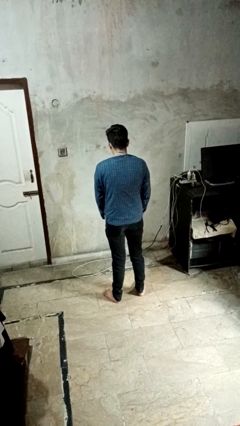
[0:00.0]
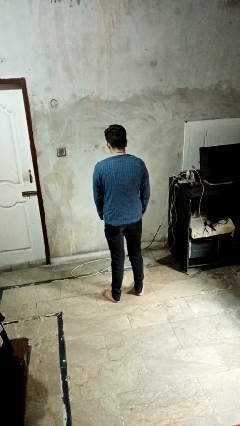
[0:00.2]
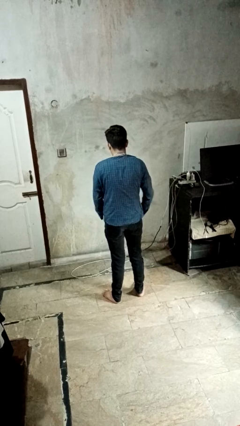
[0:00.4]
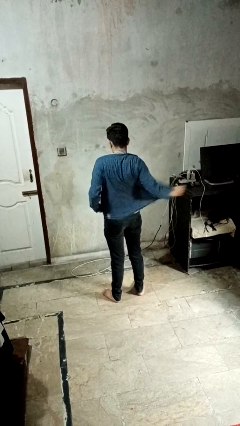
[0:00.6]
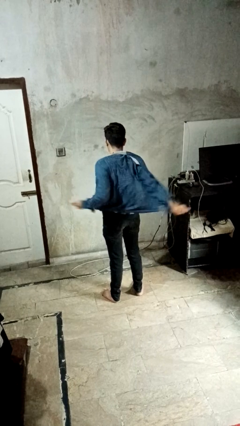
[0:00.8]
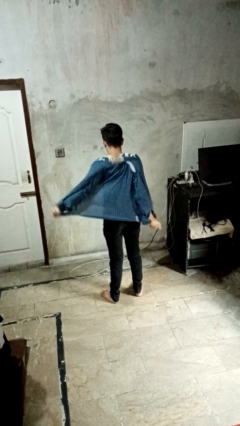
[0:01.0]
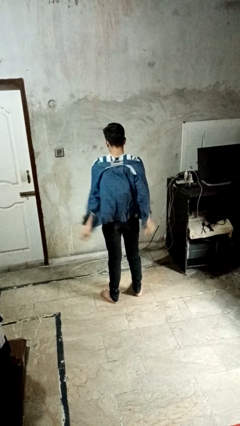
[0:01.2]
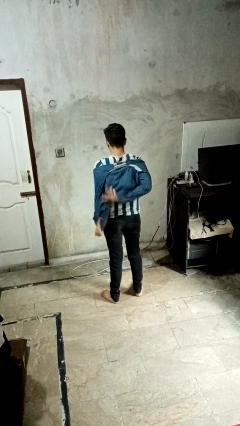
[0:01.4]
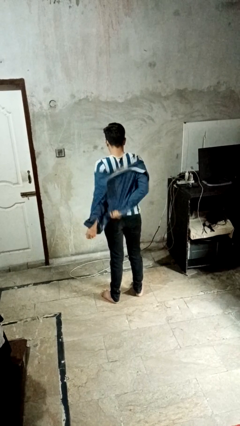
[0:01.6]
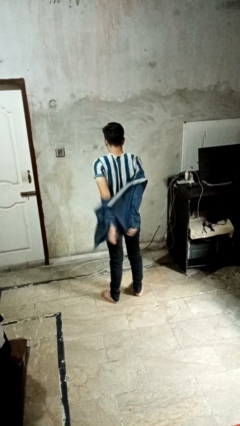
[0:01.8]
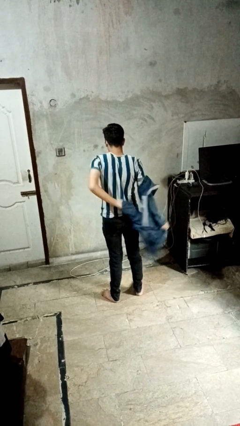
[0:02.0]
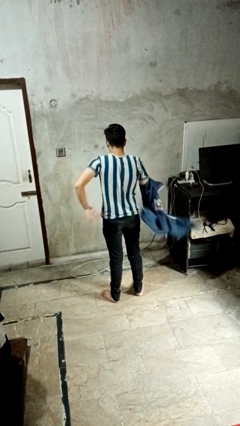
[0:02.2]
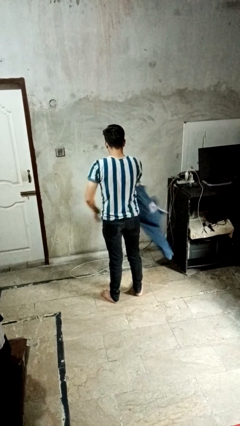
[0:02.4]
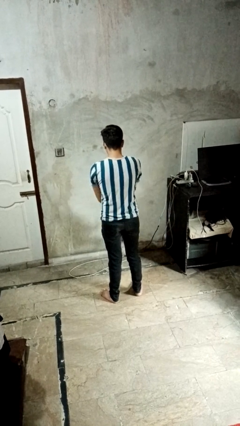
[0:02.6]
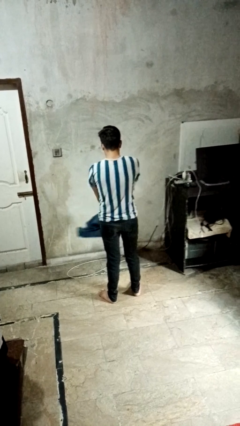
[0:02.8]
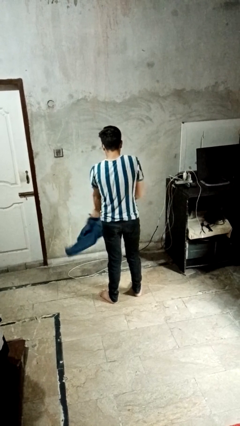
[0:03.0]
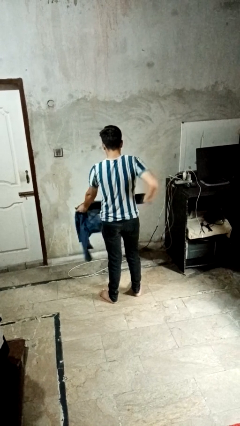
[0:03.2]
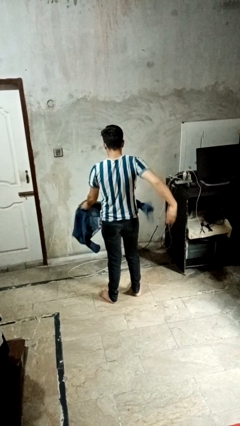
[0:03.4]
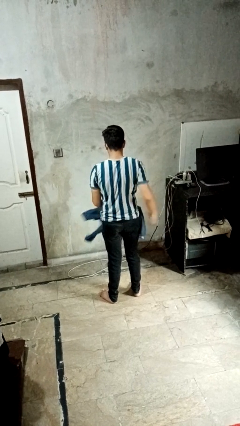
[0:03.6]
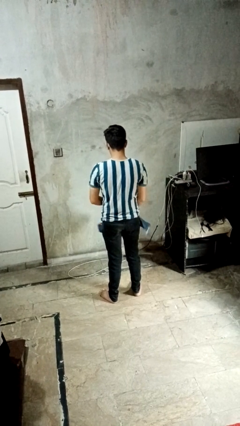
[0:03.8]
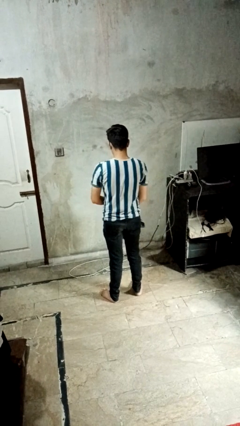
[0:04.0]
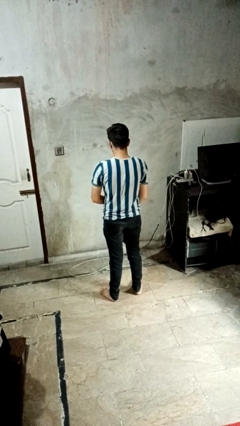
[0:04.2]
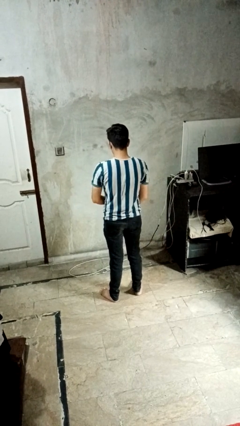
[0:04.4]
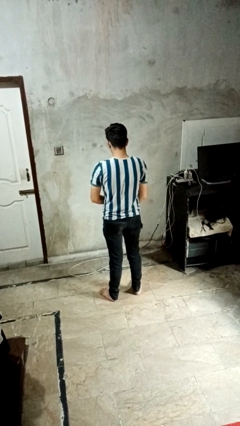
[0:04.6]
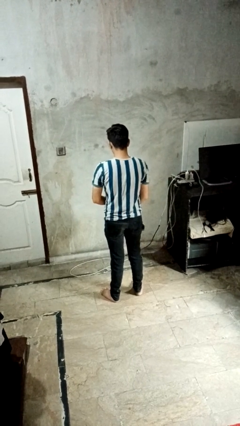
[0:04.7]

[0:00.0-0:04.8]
person takes off shirt

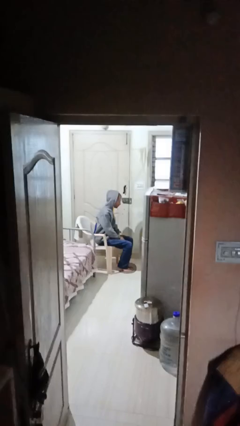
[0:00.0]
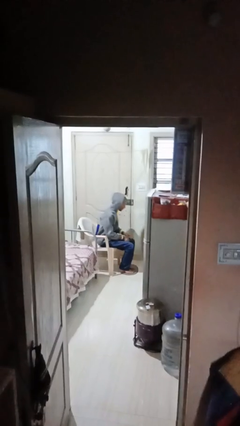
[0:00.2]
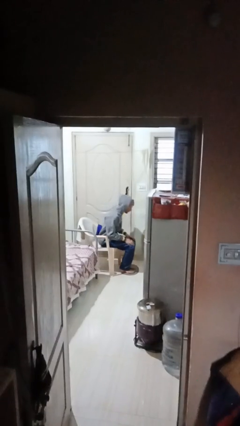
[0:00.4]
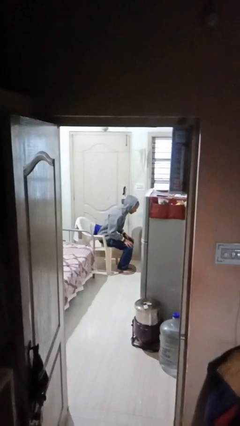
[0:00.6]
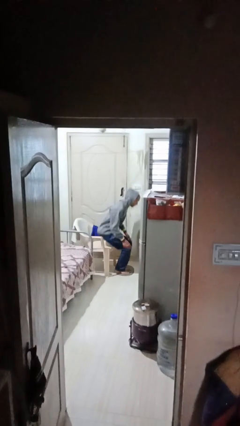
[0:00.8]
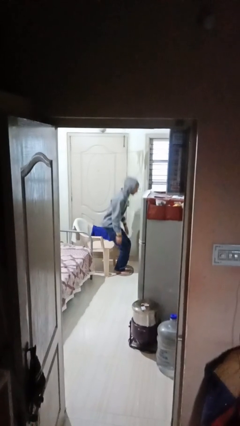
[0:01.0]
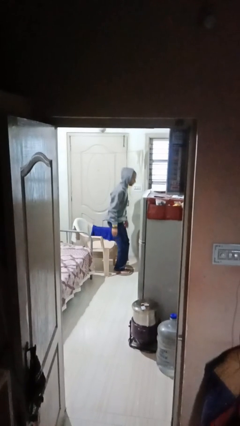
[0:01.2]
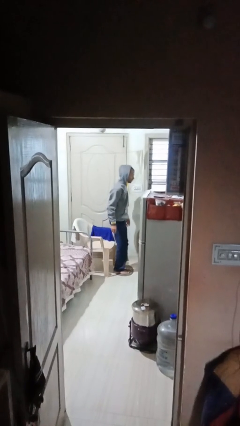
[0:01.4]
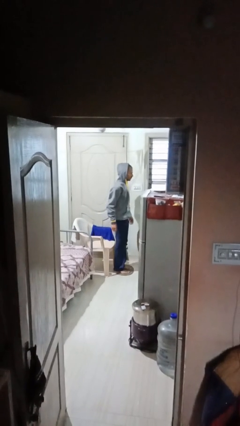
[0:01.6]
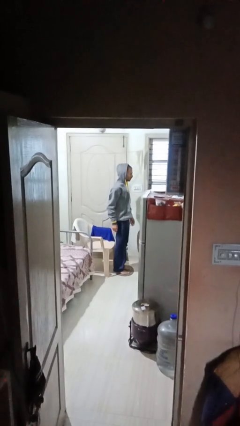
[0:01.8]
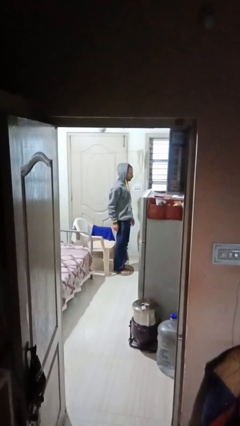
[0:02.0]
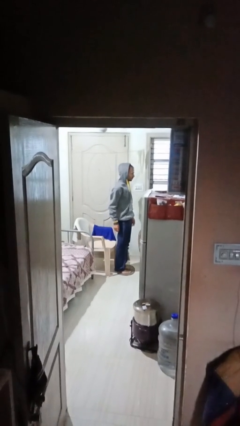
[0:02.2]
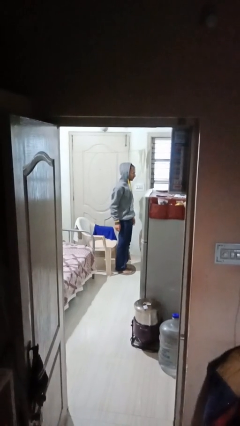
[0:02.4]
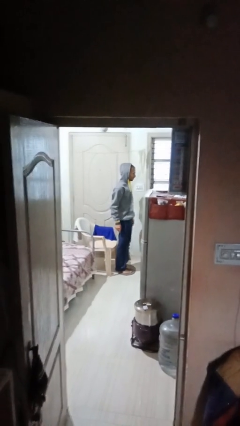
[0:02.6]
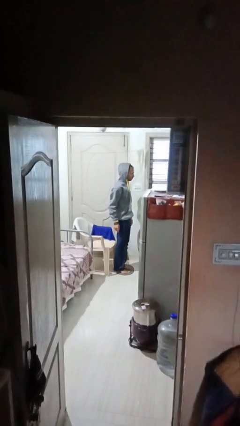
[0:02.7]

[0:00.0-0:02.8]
person stands up

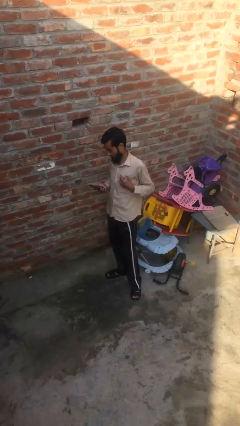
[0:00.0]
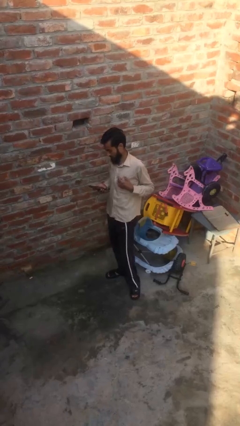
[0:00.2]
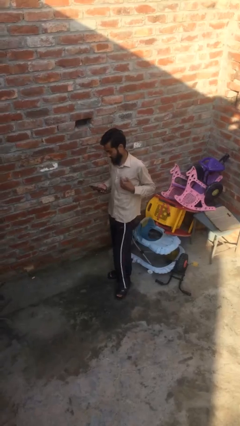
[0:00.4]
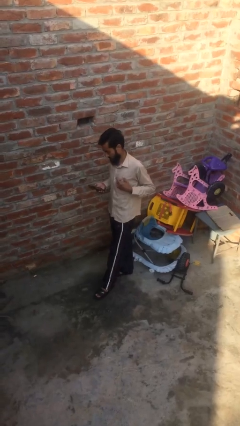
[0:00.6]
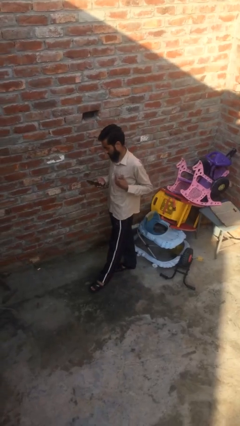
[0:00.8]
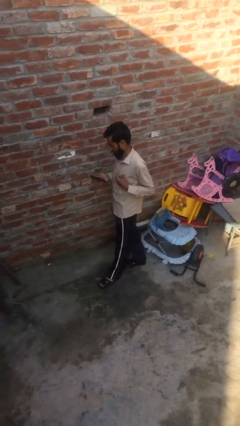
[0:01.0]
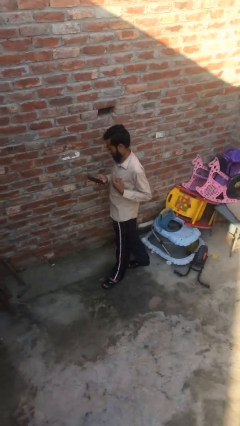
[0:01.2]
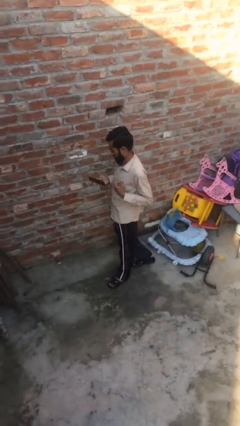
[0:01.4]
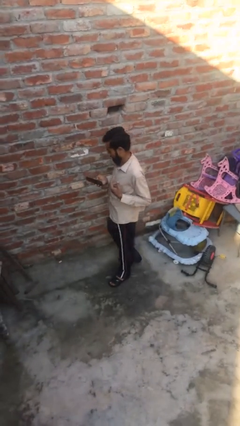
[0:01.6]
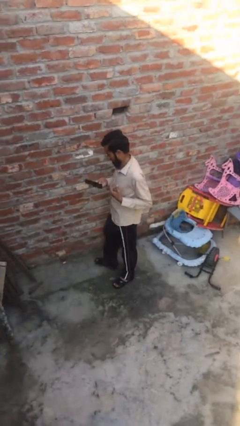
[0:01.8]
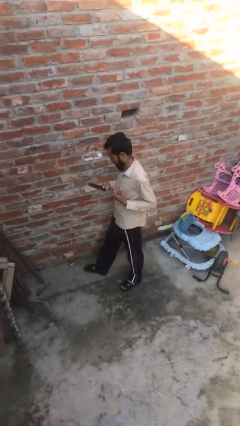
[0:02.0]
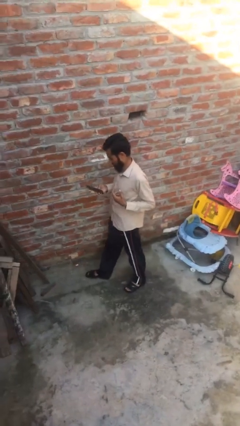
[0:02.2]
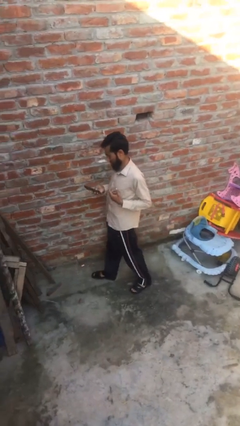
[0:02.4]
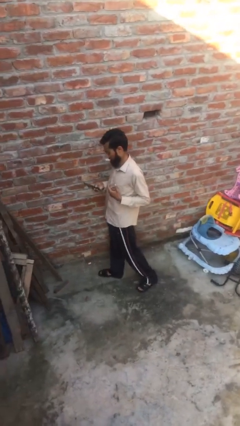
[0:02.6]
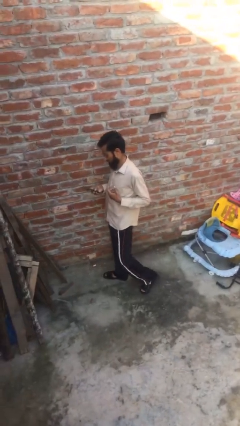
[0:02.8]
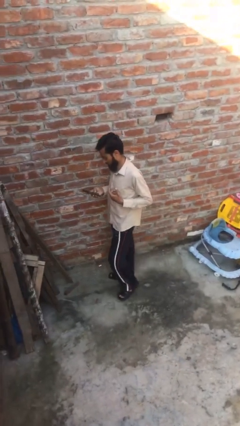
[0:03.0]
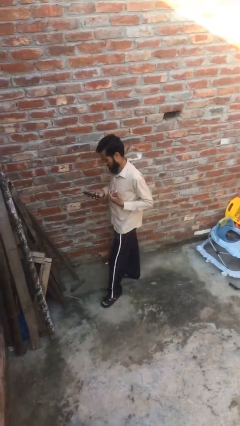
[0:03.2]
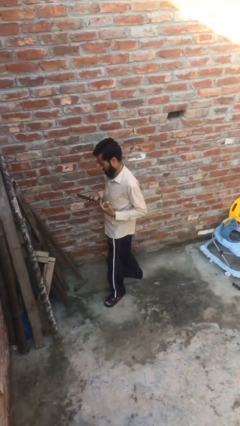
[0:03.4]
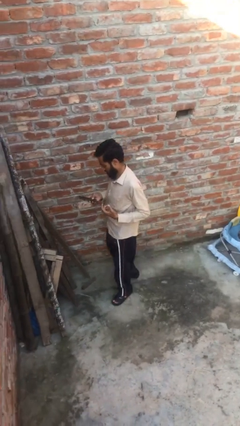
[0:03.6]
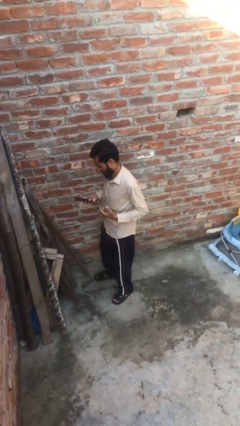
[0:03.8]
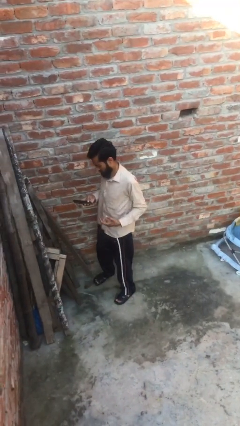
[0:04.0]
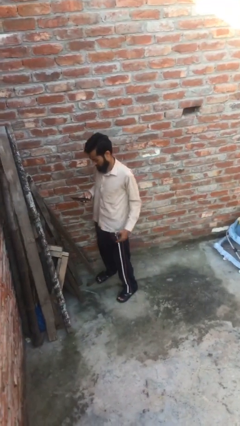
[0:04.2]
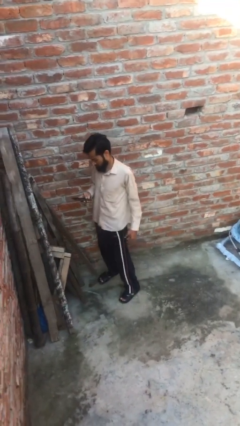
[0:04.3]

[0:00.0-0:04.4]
person texts on phone

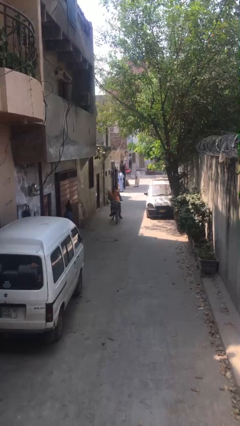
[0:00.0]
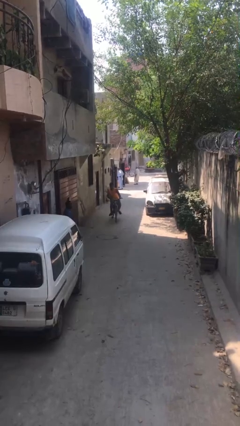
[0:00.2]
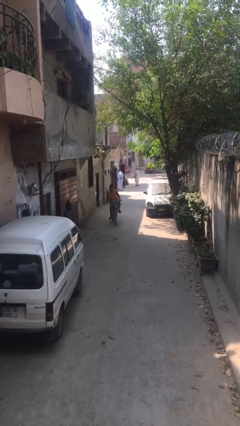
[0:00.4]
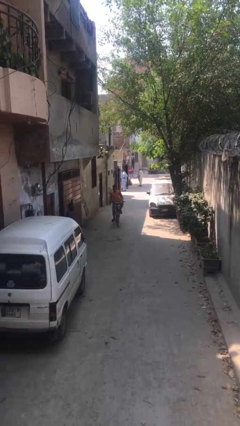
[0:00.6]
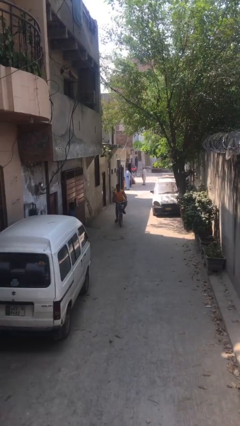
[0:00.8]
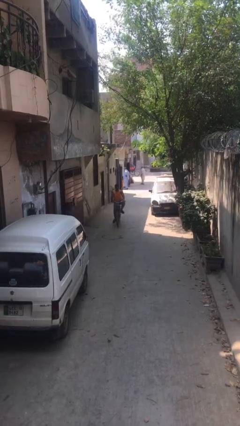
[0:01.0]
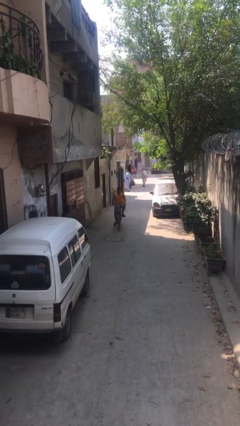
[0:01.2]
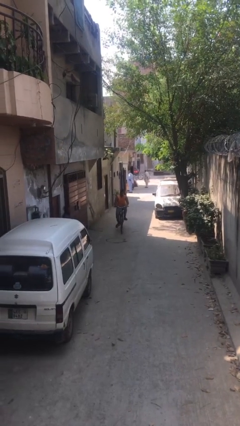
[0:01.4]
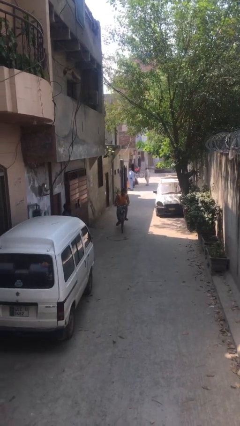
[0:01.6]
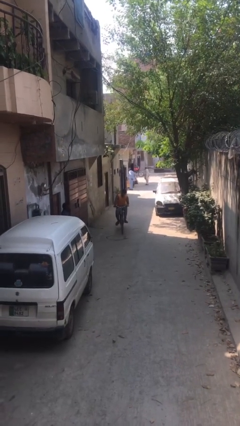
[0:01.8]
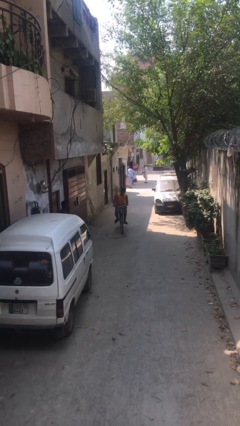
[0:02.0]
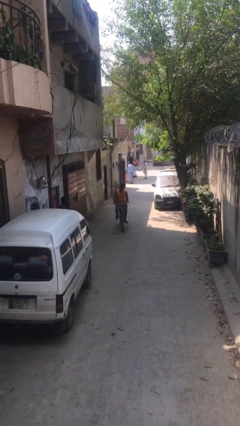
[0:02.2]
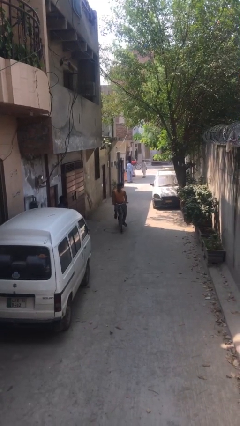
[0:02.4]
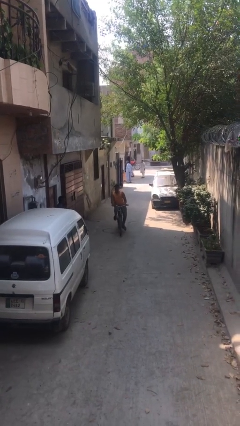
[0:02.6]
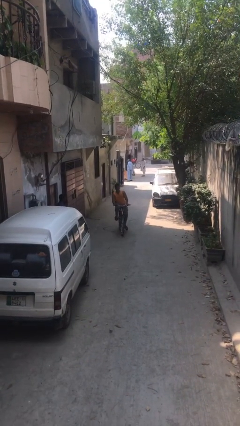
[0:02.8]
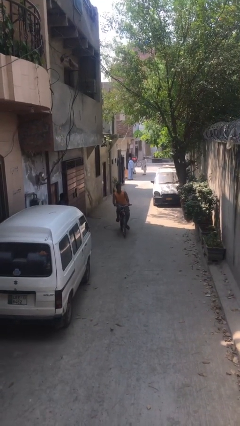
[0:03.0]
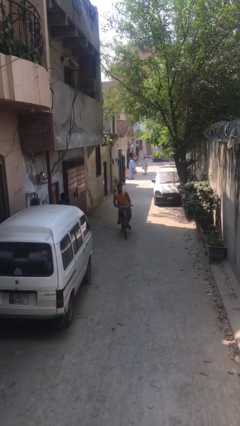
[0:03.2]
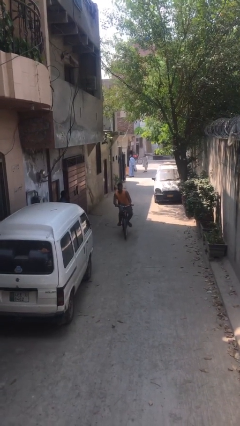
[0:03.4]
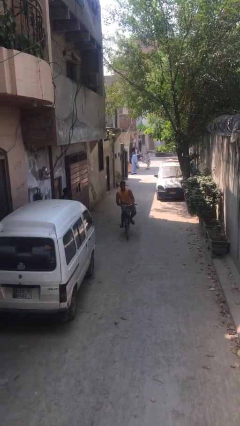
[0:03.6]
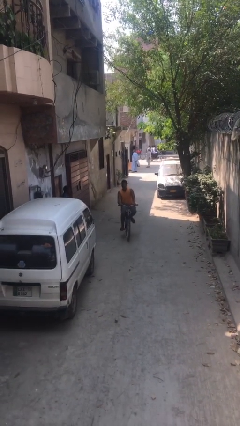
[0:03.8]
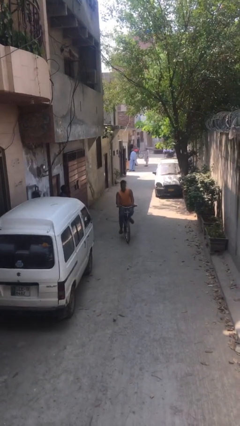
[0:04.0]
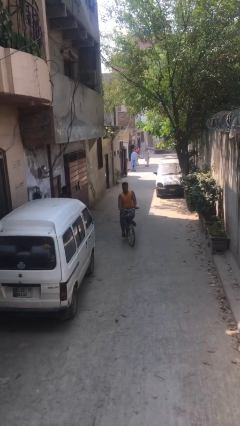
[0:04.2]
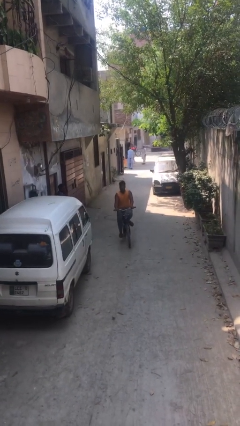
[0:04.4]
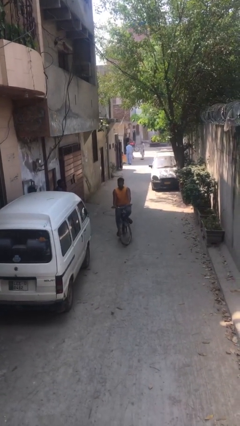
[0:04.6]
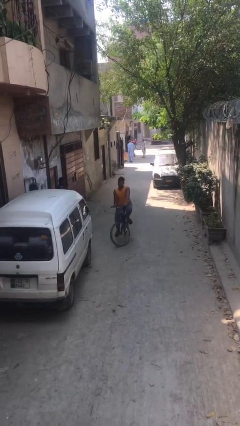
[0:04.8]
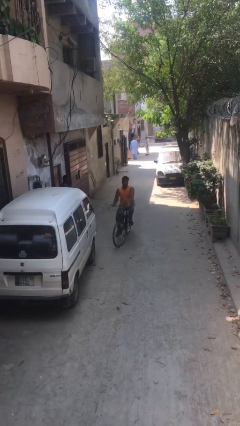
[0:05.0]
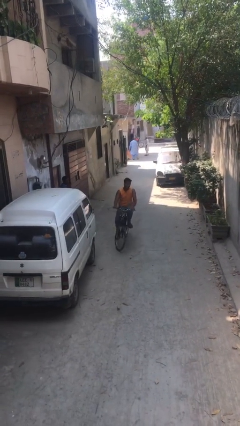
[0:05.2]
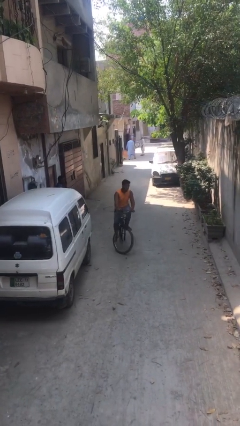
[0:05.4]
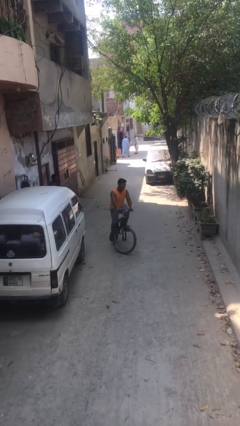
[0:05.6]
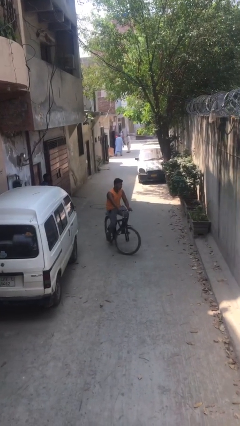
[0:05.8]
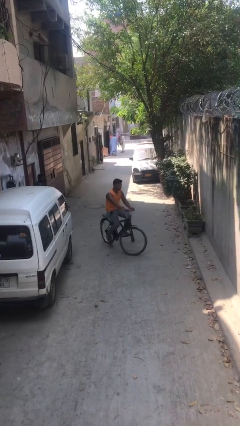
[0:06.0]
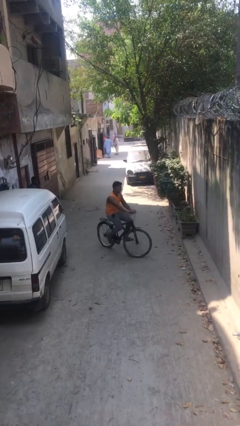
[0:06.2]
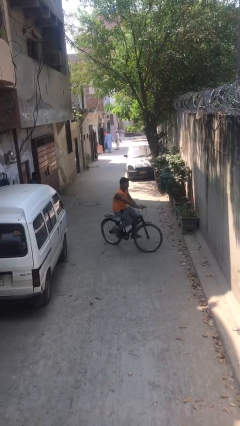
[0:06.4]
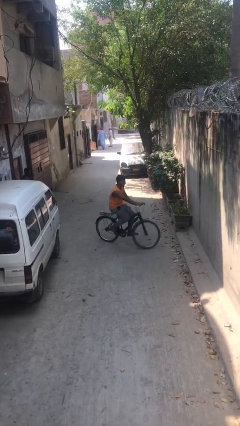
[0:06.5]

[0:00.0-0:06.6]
person rides bicycle
